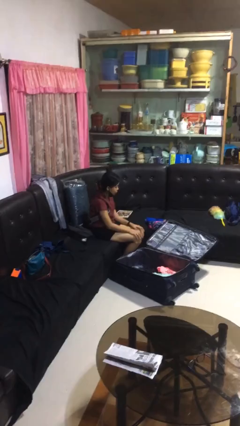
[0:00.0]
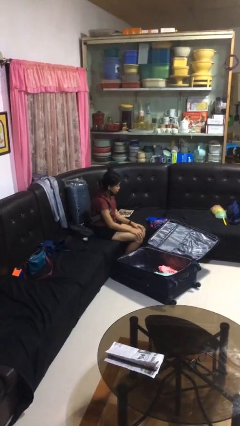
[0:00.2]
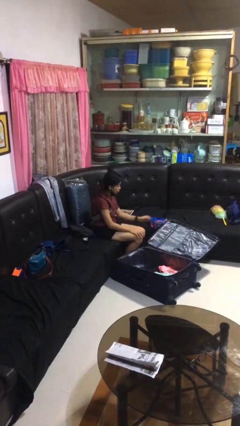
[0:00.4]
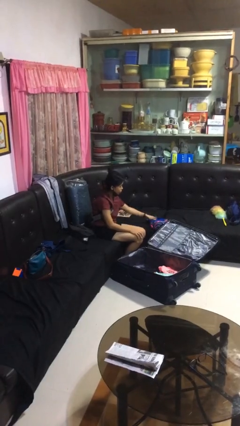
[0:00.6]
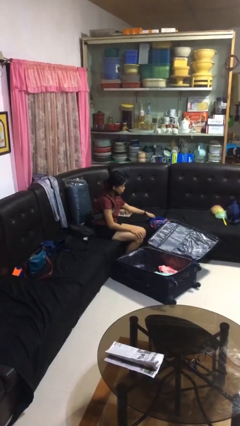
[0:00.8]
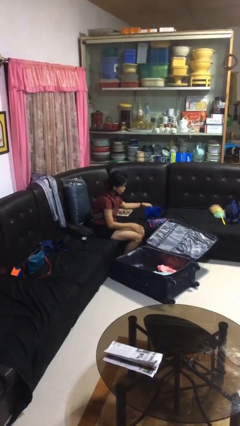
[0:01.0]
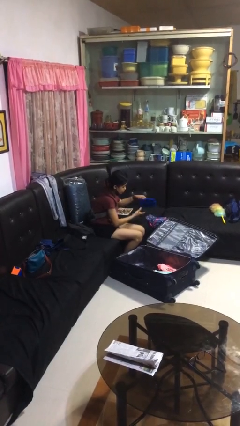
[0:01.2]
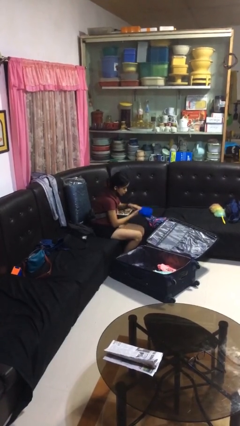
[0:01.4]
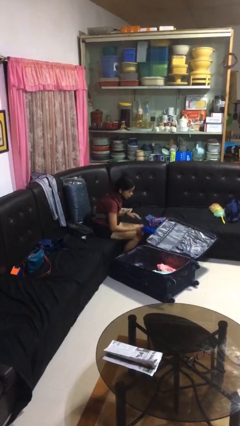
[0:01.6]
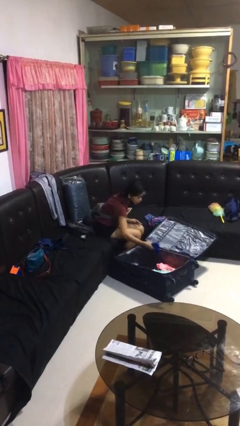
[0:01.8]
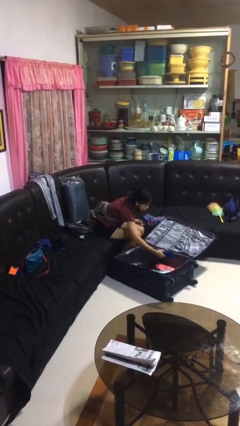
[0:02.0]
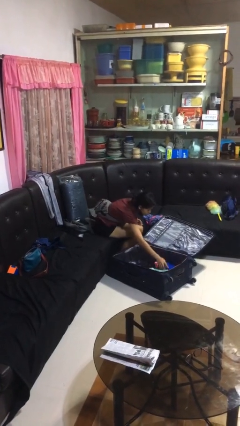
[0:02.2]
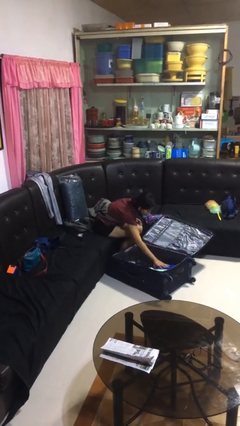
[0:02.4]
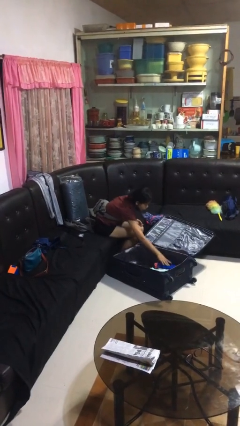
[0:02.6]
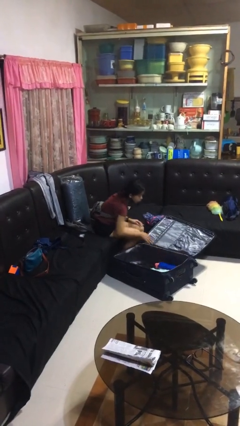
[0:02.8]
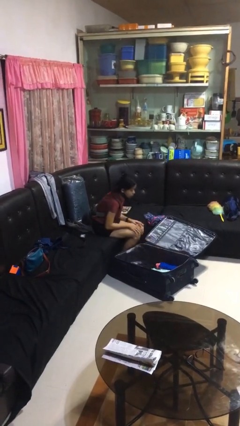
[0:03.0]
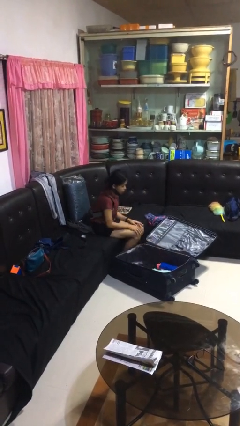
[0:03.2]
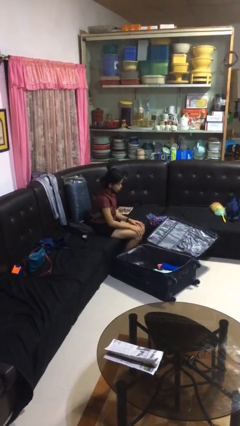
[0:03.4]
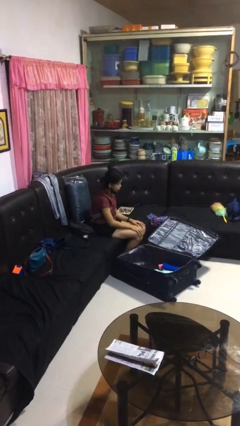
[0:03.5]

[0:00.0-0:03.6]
person loads clothes into suitcase

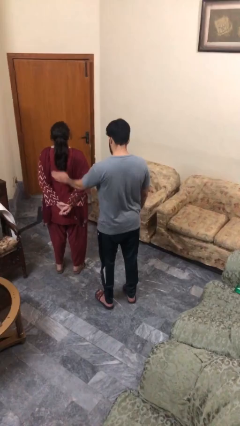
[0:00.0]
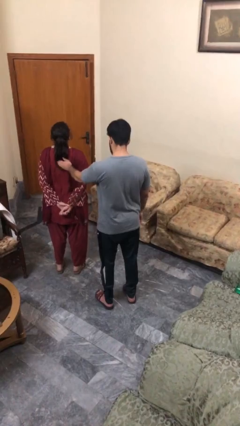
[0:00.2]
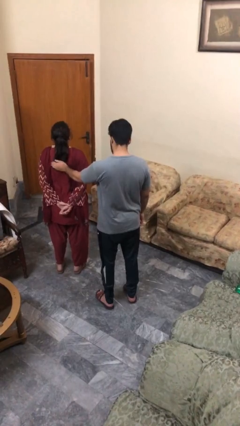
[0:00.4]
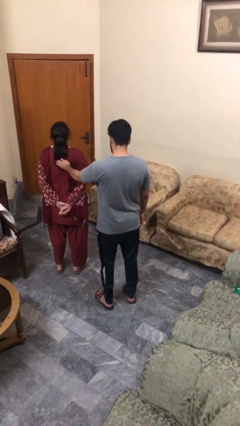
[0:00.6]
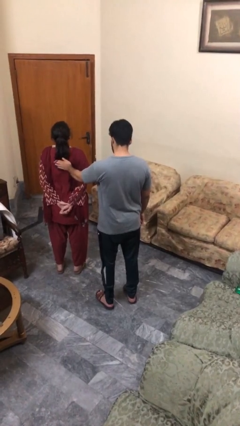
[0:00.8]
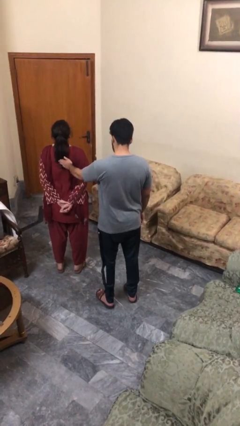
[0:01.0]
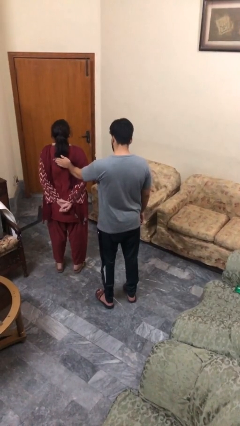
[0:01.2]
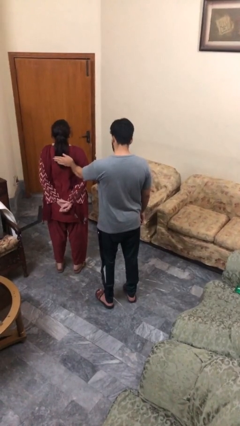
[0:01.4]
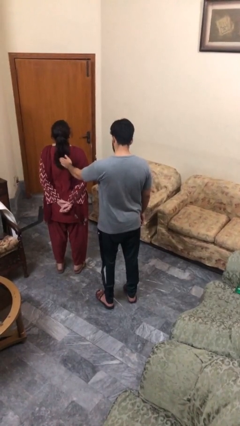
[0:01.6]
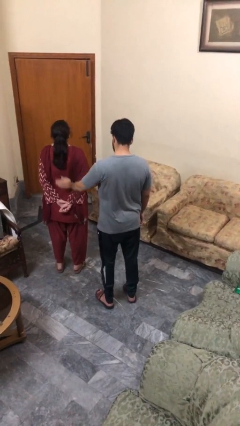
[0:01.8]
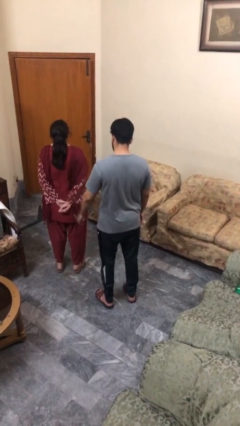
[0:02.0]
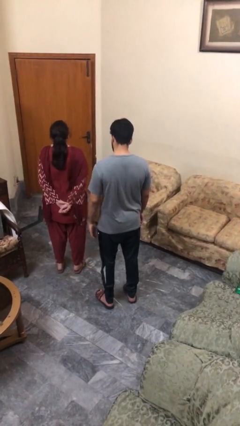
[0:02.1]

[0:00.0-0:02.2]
person touches back of person

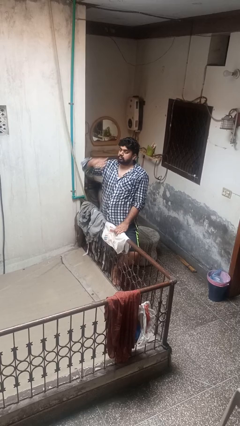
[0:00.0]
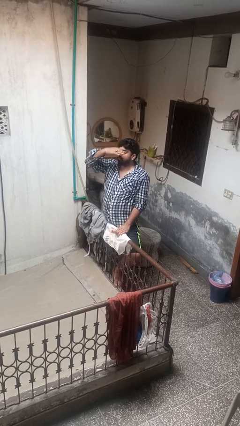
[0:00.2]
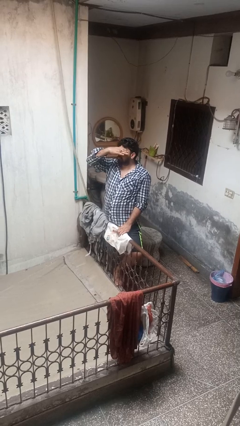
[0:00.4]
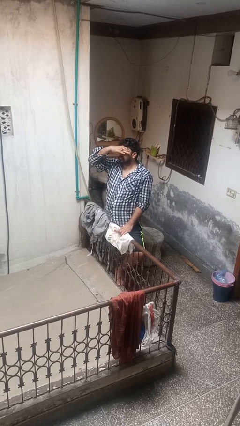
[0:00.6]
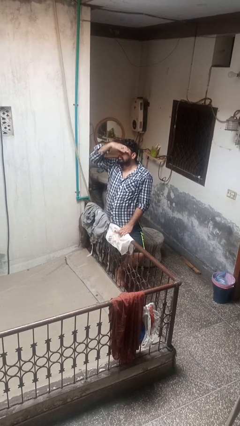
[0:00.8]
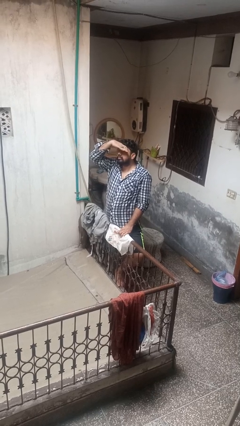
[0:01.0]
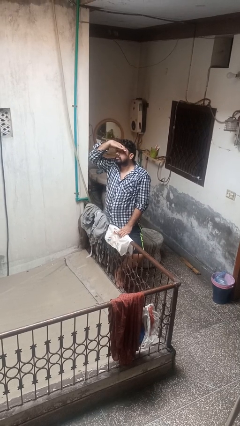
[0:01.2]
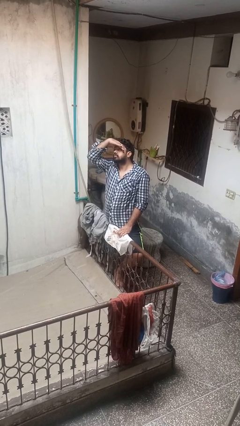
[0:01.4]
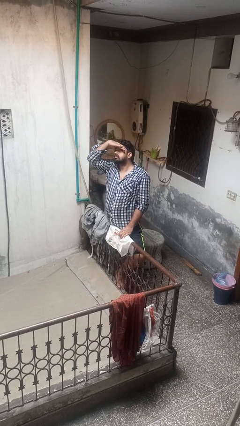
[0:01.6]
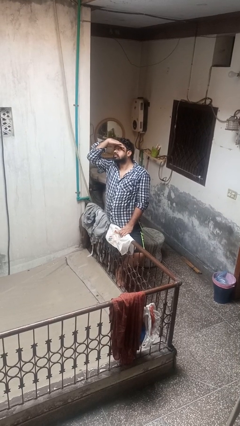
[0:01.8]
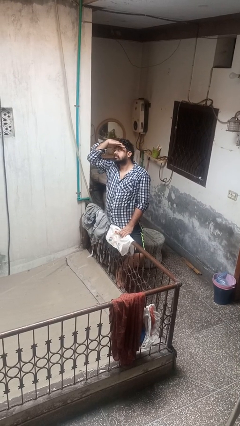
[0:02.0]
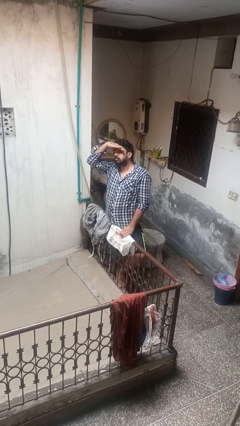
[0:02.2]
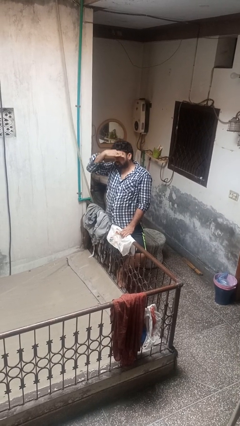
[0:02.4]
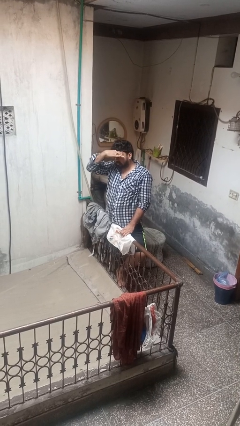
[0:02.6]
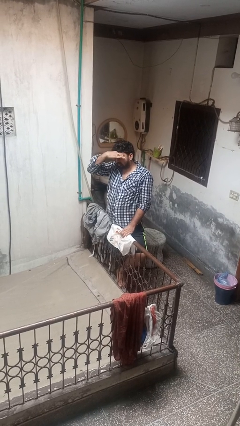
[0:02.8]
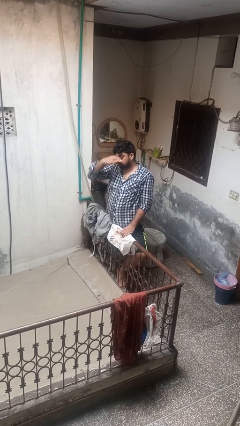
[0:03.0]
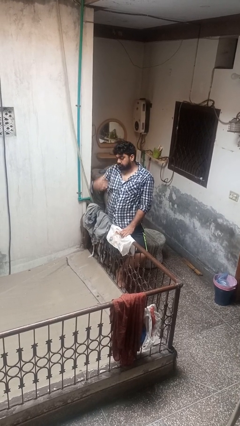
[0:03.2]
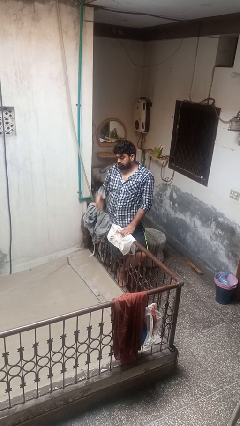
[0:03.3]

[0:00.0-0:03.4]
person shades eyes

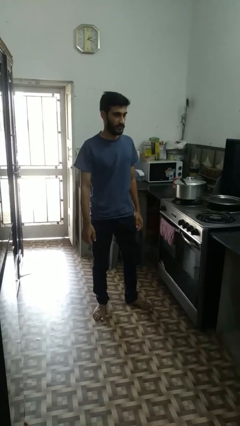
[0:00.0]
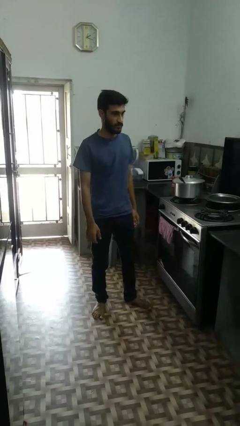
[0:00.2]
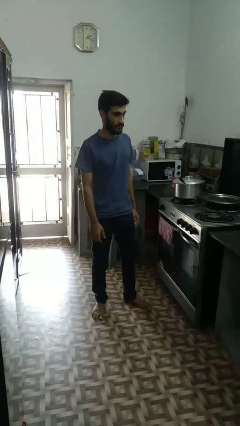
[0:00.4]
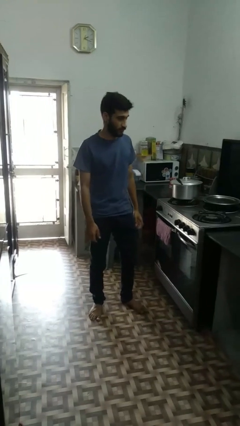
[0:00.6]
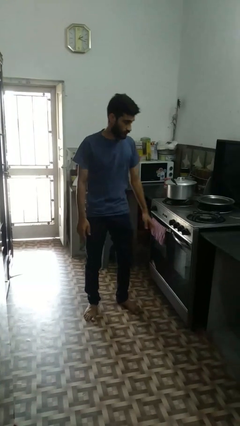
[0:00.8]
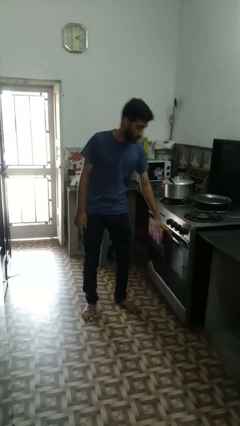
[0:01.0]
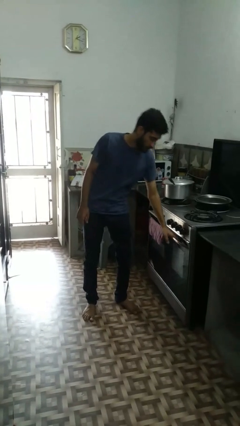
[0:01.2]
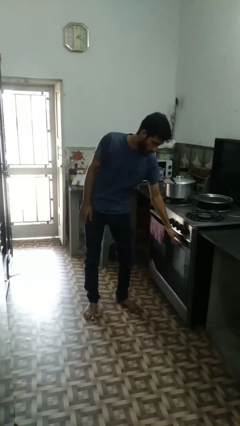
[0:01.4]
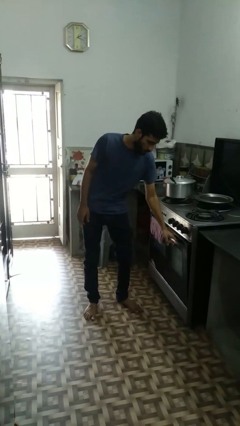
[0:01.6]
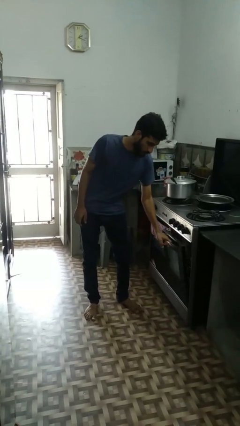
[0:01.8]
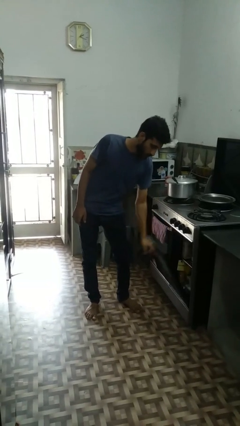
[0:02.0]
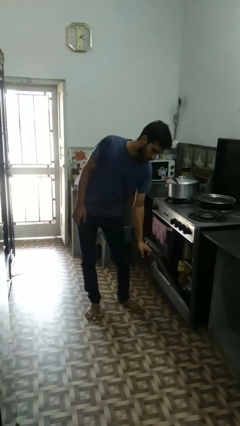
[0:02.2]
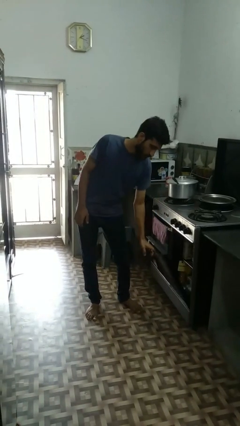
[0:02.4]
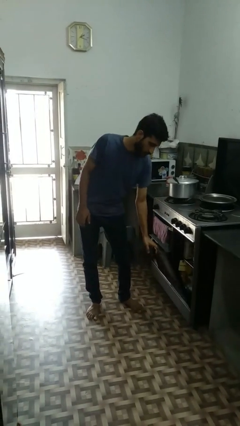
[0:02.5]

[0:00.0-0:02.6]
person opens dishwasher

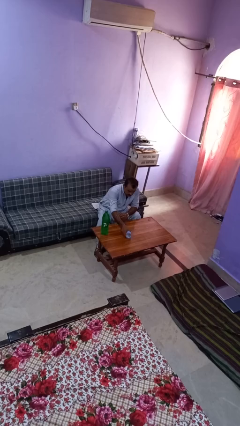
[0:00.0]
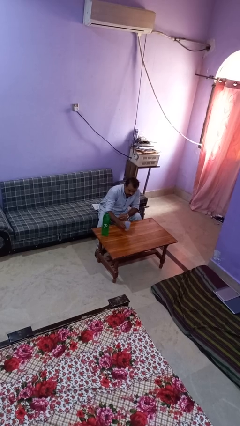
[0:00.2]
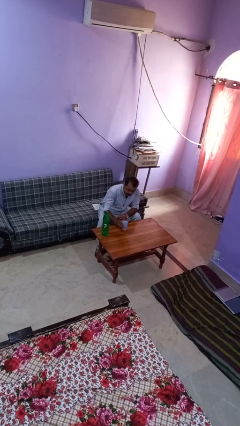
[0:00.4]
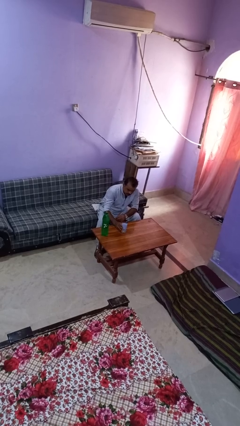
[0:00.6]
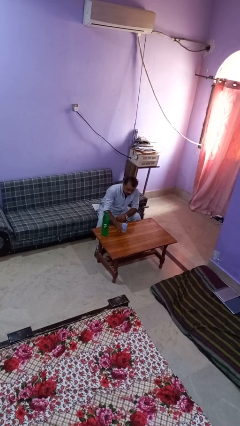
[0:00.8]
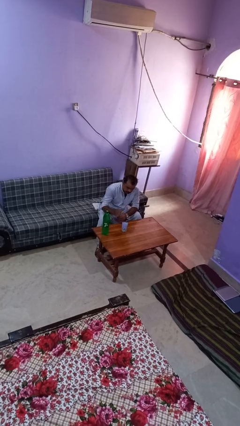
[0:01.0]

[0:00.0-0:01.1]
person sets upright glass

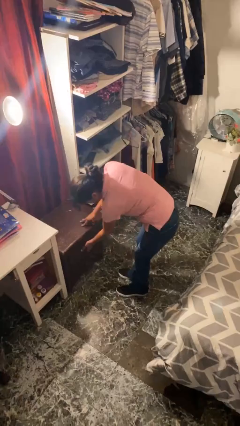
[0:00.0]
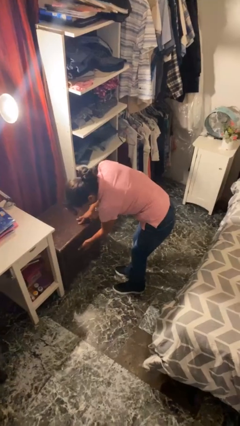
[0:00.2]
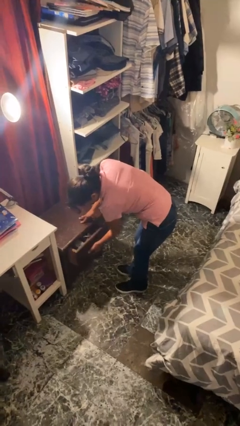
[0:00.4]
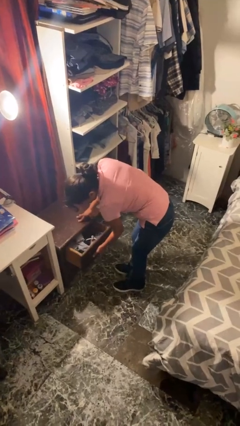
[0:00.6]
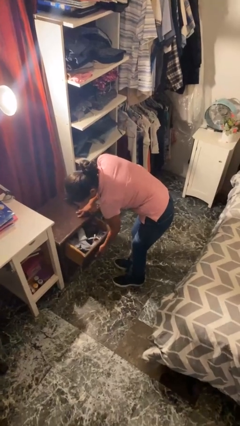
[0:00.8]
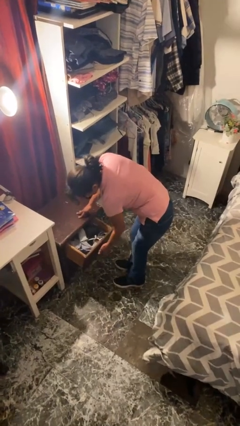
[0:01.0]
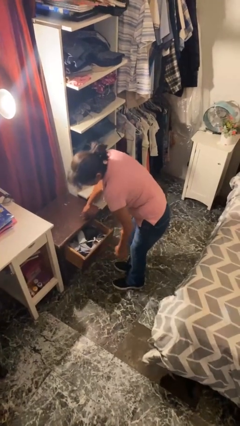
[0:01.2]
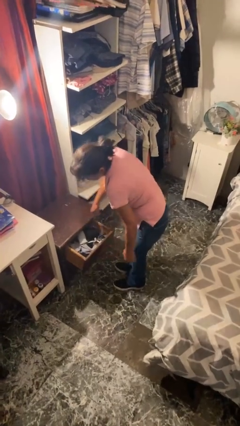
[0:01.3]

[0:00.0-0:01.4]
person opens dresser drawer

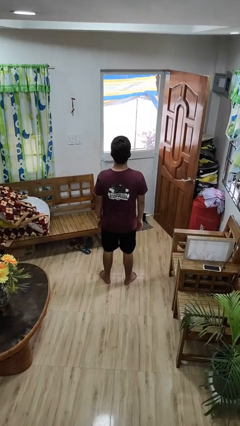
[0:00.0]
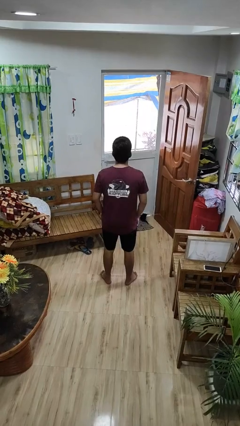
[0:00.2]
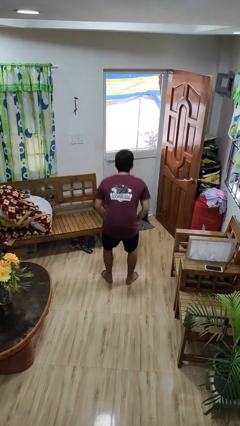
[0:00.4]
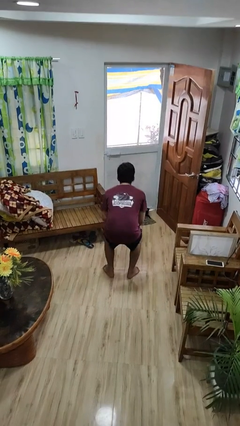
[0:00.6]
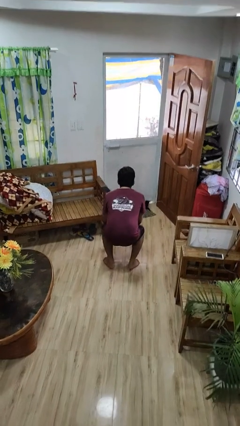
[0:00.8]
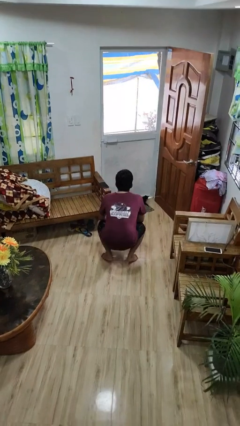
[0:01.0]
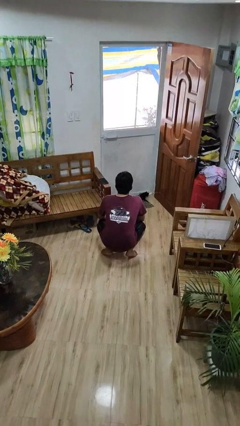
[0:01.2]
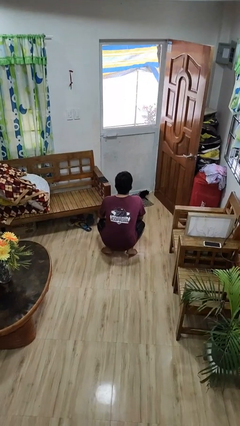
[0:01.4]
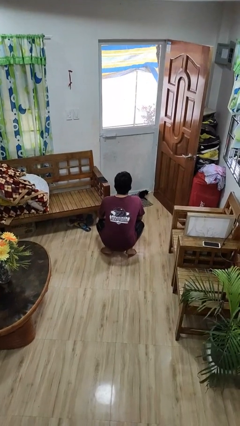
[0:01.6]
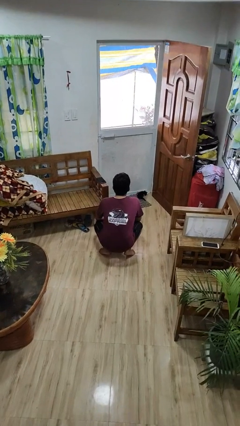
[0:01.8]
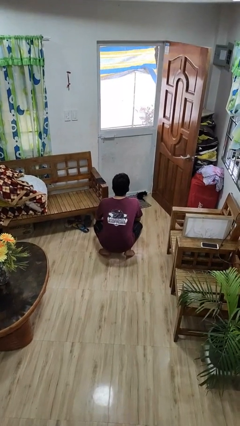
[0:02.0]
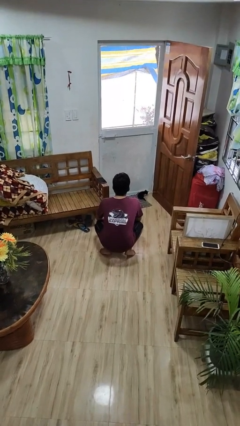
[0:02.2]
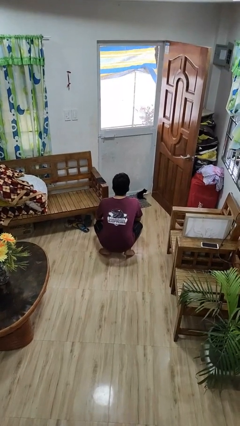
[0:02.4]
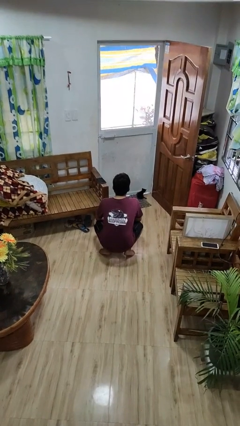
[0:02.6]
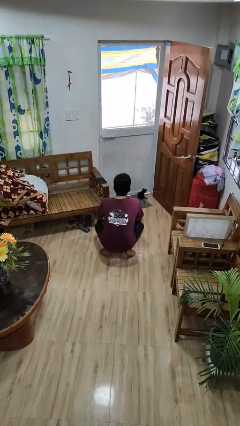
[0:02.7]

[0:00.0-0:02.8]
person squats
